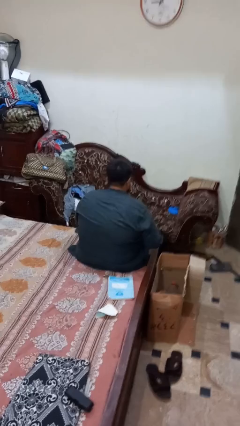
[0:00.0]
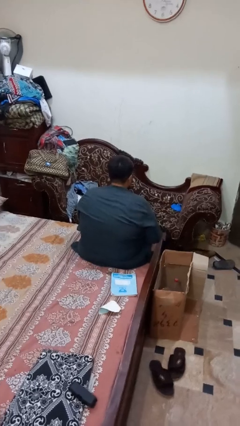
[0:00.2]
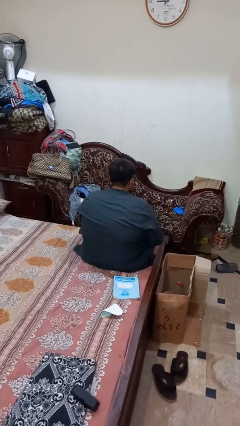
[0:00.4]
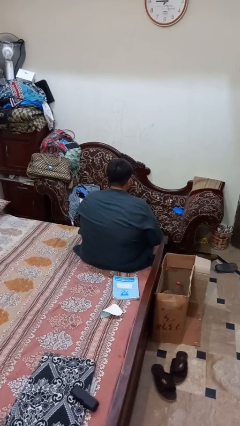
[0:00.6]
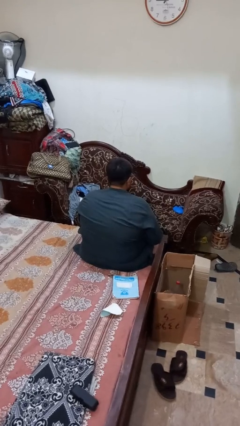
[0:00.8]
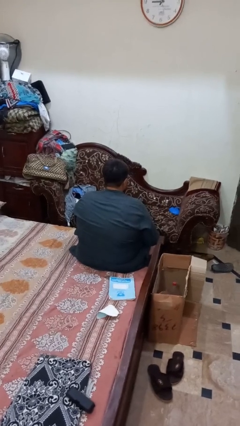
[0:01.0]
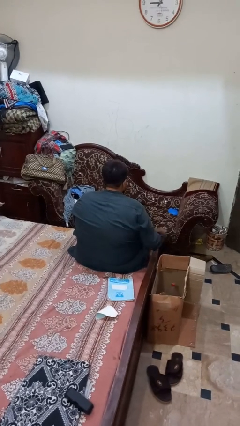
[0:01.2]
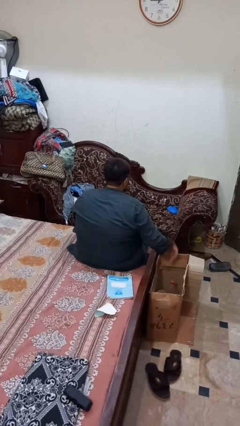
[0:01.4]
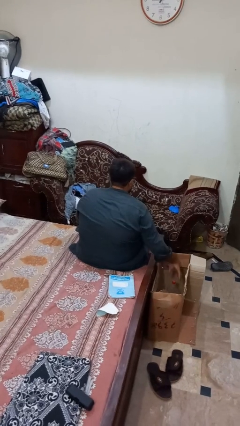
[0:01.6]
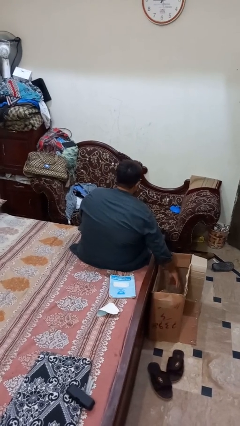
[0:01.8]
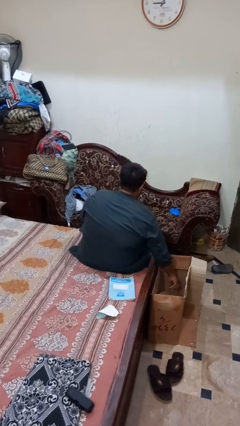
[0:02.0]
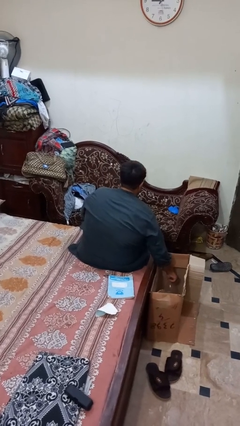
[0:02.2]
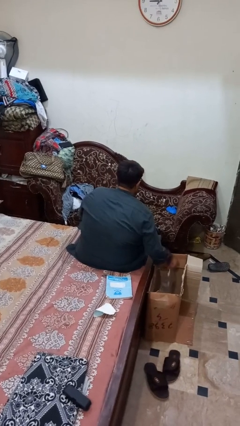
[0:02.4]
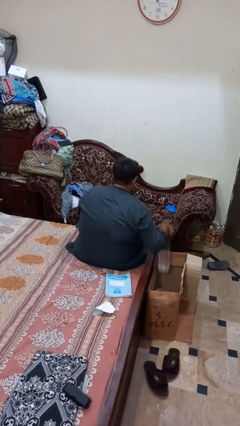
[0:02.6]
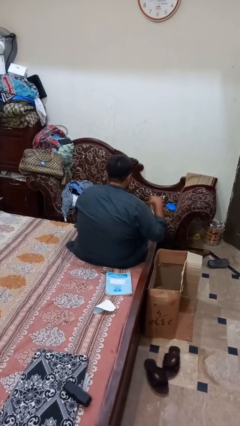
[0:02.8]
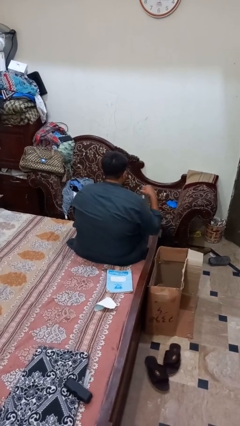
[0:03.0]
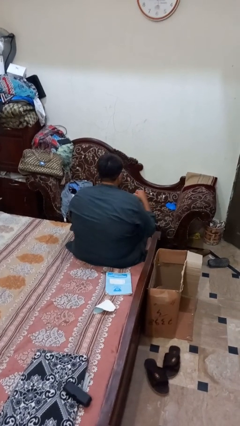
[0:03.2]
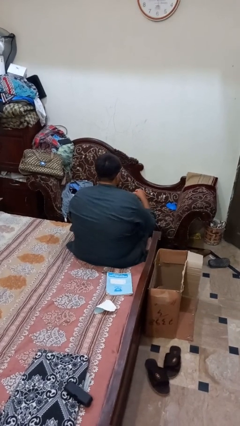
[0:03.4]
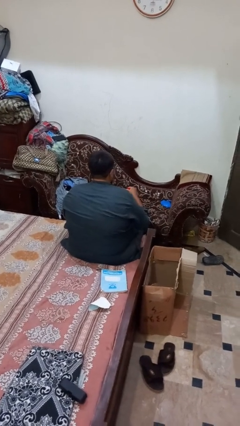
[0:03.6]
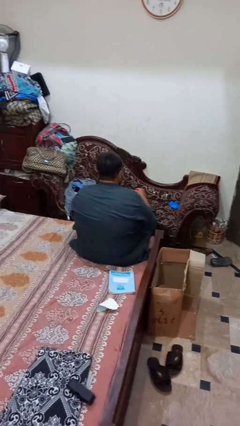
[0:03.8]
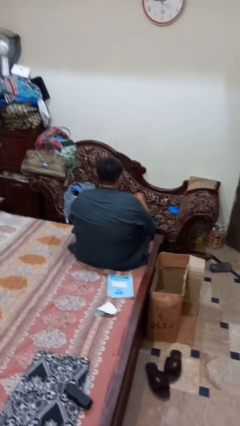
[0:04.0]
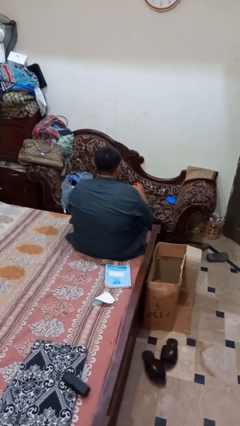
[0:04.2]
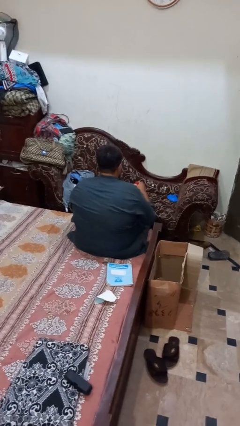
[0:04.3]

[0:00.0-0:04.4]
person takes object from box

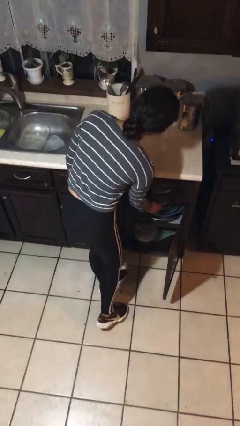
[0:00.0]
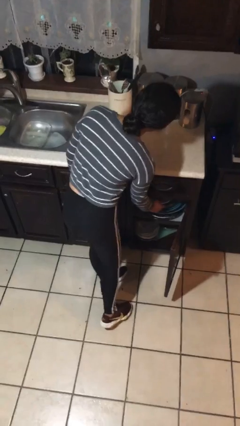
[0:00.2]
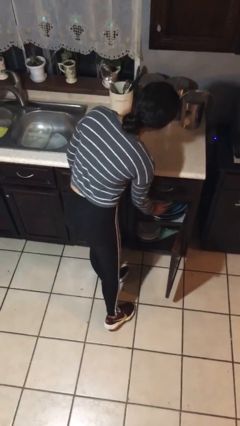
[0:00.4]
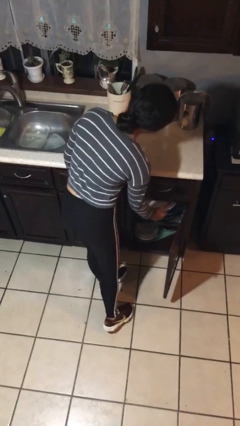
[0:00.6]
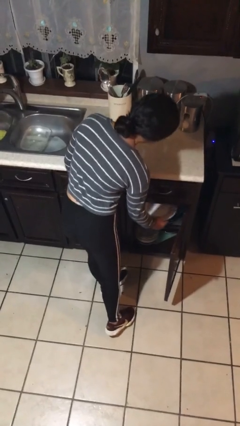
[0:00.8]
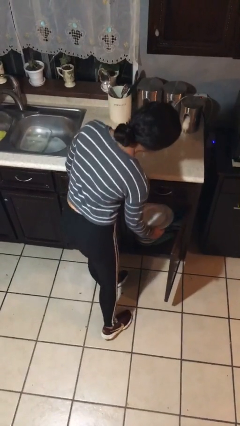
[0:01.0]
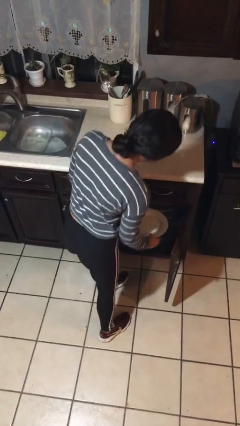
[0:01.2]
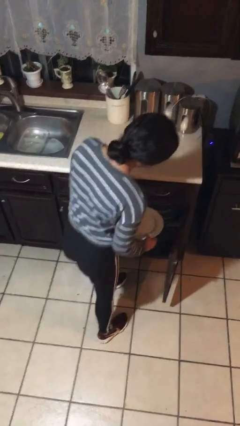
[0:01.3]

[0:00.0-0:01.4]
person puts object in cabinet

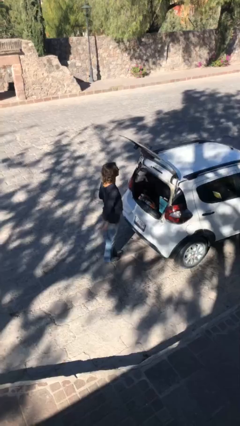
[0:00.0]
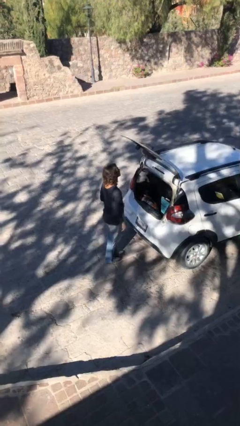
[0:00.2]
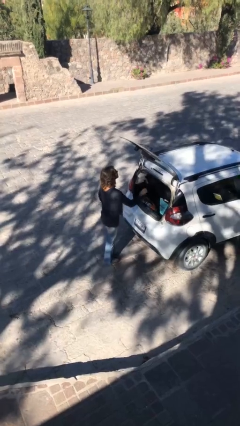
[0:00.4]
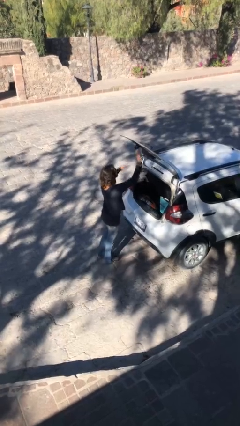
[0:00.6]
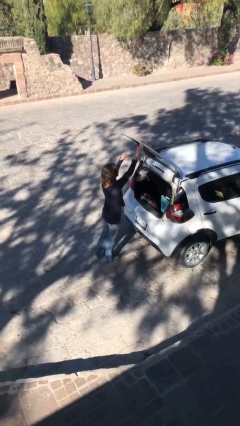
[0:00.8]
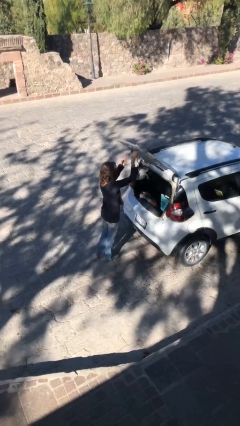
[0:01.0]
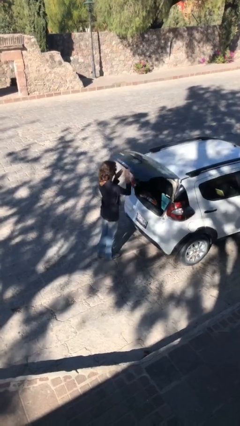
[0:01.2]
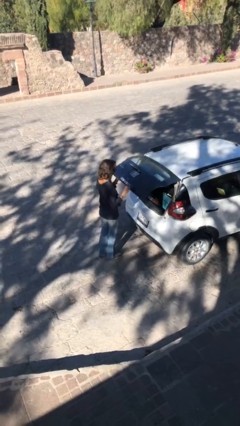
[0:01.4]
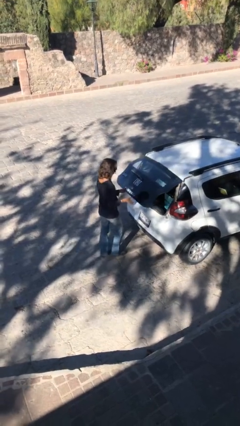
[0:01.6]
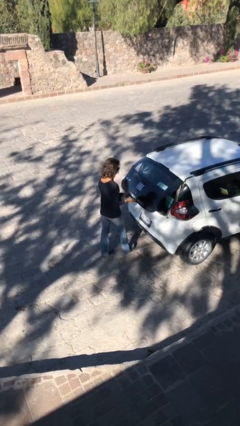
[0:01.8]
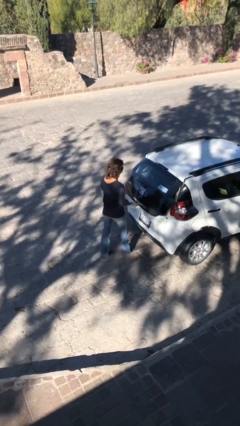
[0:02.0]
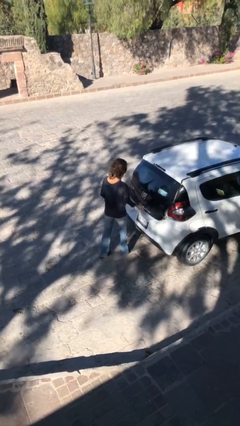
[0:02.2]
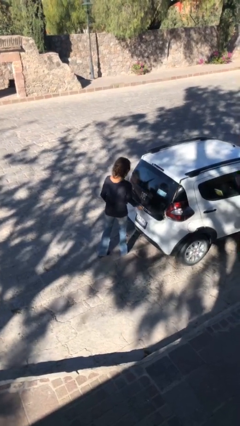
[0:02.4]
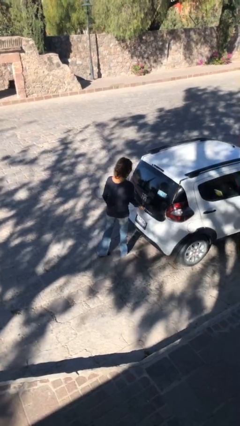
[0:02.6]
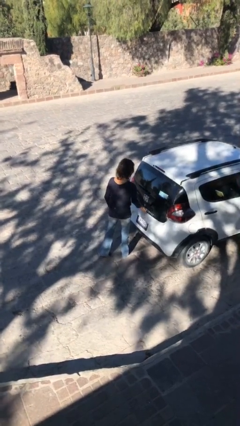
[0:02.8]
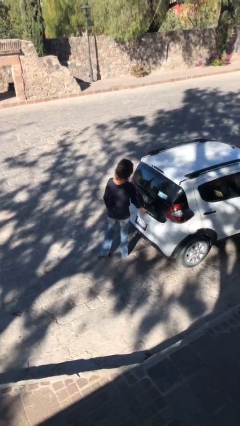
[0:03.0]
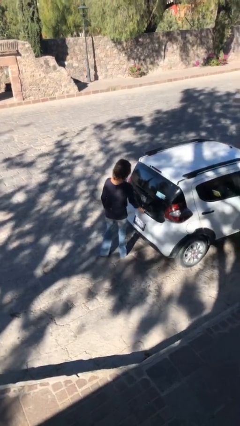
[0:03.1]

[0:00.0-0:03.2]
person closes car trunk

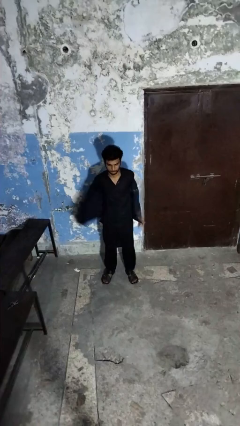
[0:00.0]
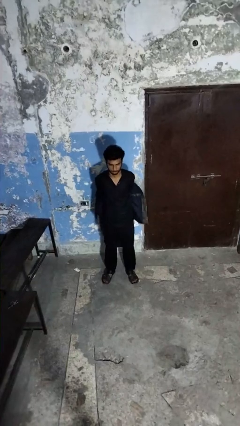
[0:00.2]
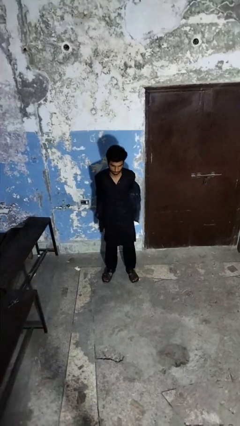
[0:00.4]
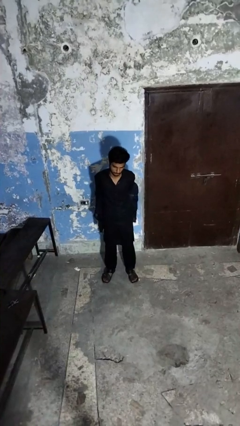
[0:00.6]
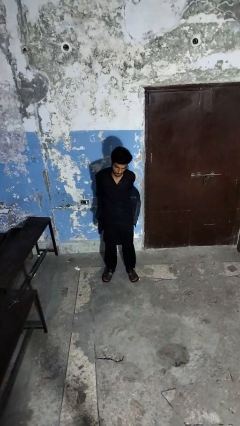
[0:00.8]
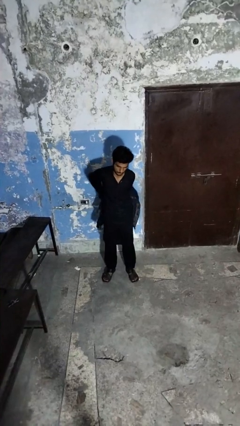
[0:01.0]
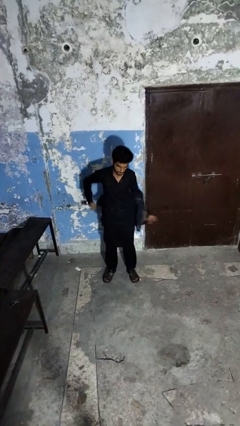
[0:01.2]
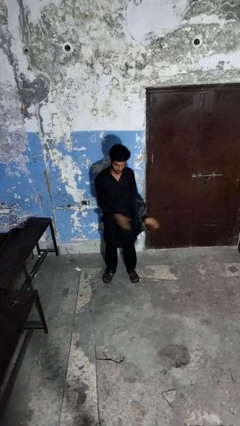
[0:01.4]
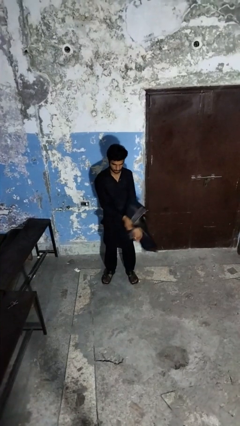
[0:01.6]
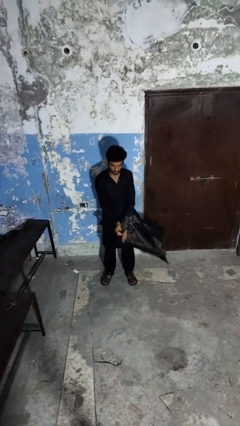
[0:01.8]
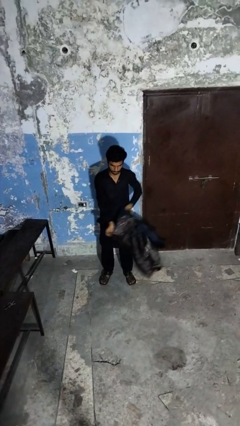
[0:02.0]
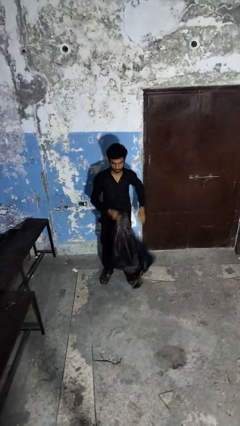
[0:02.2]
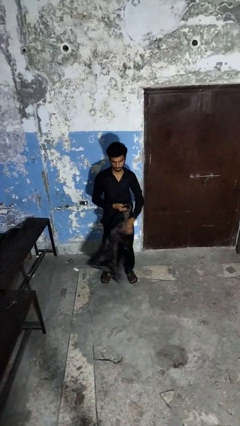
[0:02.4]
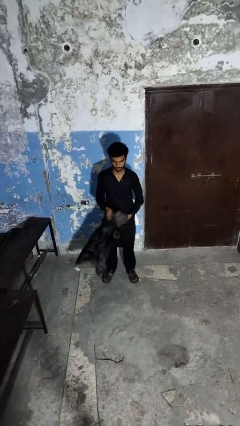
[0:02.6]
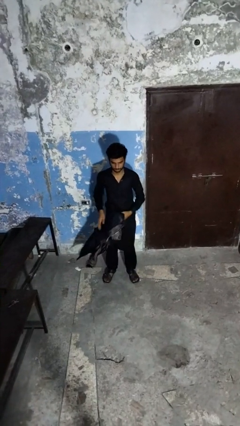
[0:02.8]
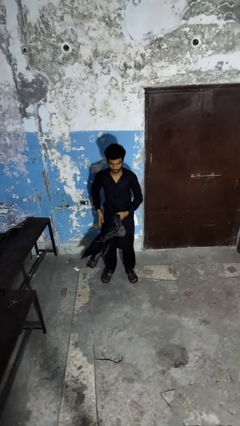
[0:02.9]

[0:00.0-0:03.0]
person takes off jacket

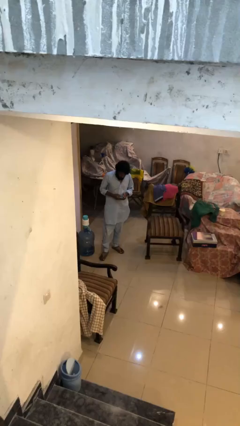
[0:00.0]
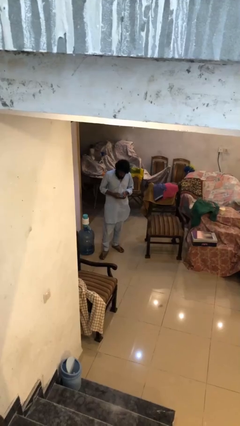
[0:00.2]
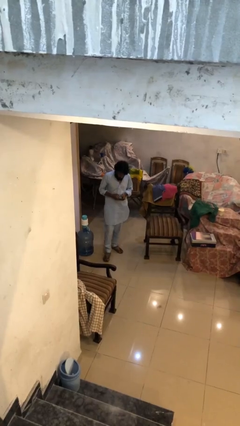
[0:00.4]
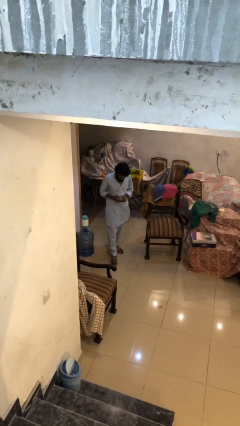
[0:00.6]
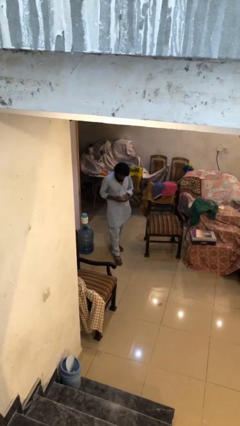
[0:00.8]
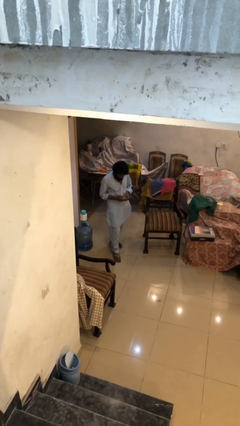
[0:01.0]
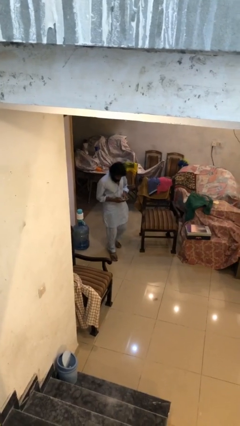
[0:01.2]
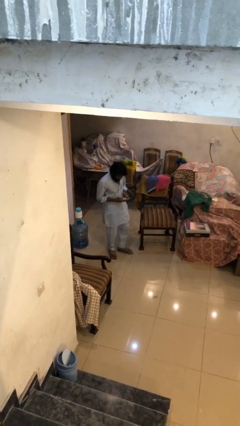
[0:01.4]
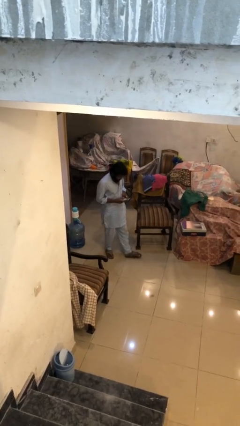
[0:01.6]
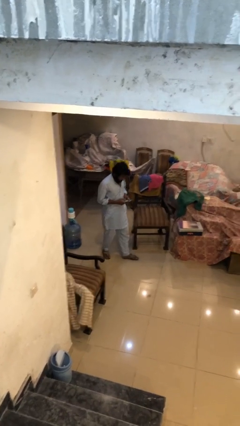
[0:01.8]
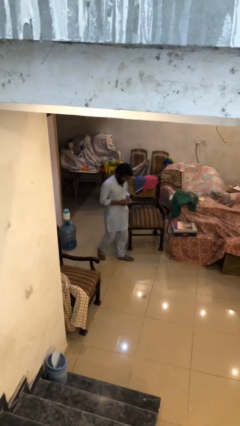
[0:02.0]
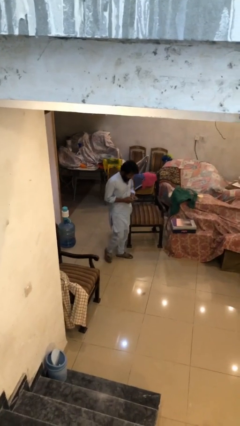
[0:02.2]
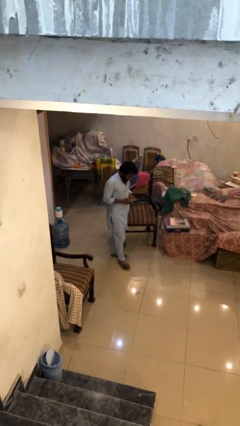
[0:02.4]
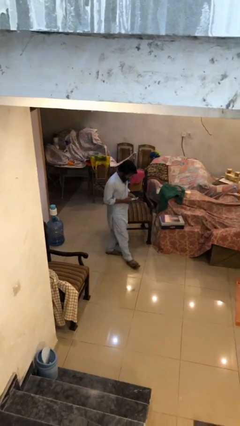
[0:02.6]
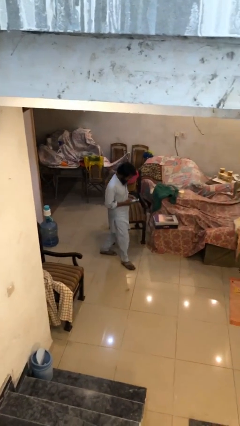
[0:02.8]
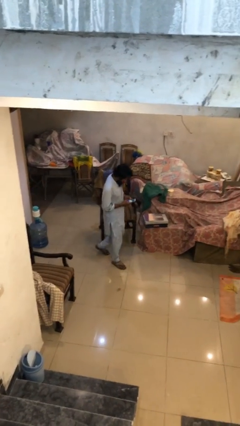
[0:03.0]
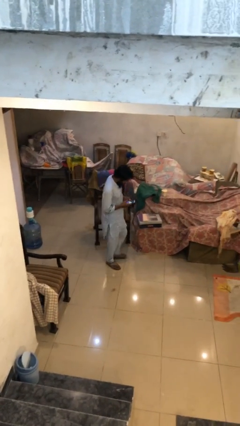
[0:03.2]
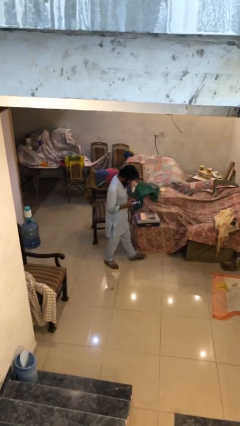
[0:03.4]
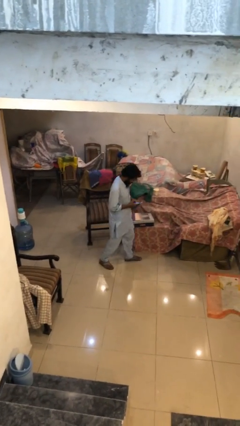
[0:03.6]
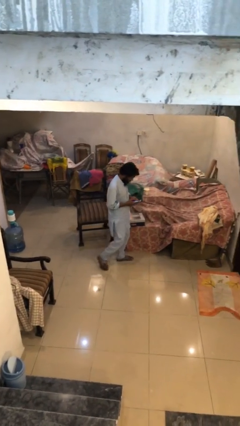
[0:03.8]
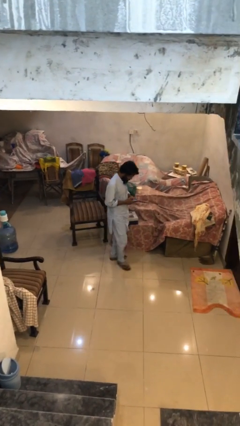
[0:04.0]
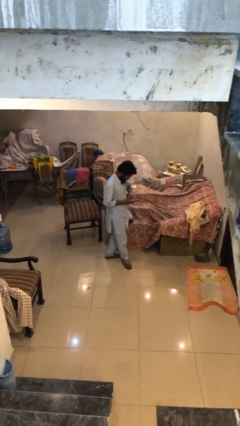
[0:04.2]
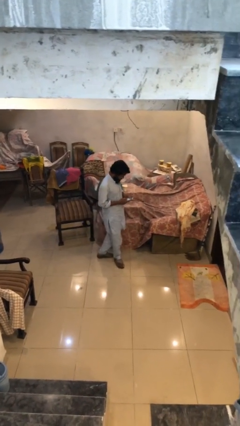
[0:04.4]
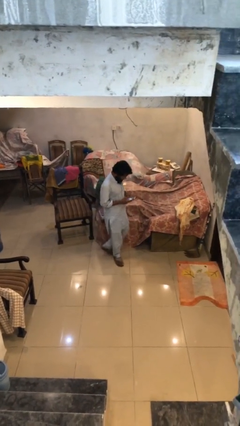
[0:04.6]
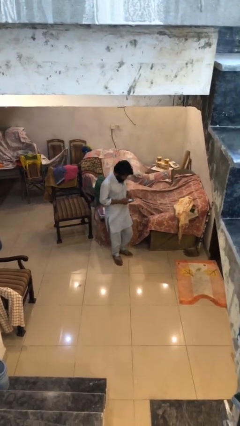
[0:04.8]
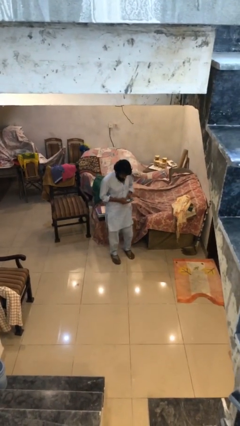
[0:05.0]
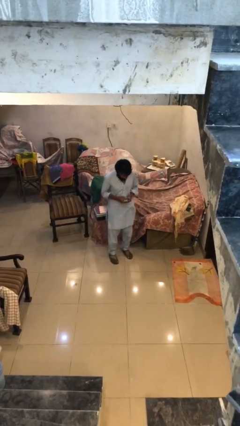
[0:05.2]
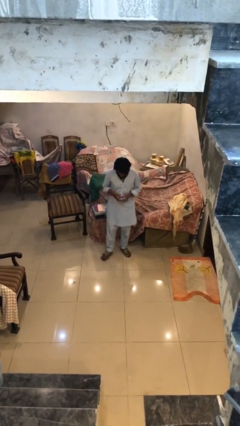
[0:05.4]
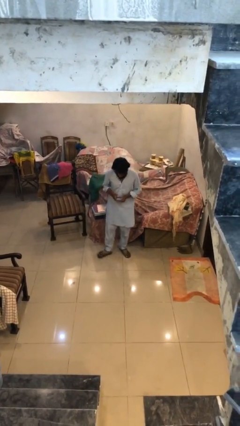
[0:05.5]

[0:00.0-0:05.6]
person texts on phone
